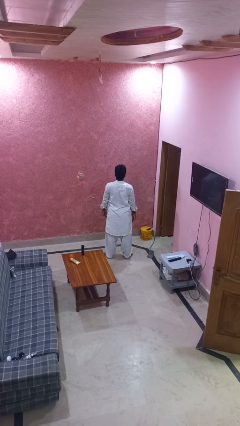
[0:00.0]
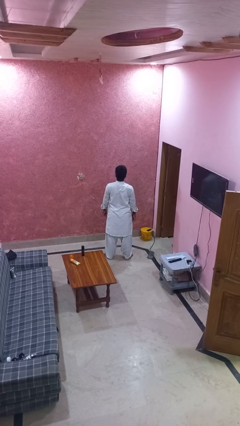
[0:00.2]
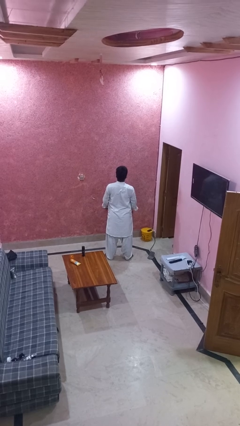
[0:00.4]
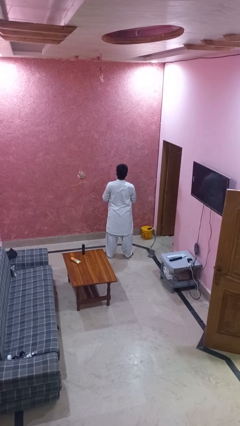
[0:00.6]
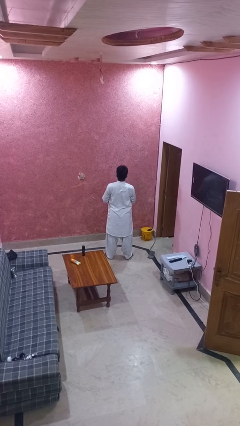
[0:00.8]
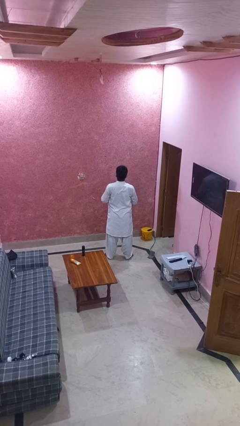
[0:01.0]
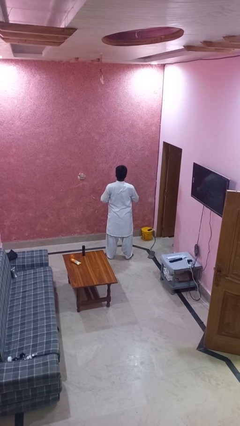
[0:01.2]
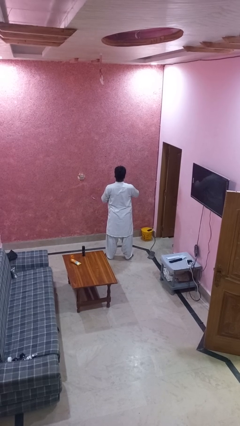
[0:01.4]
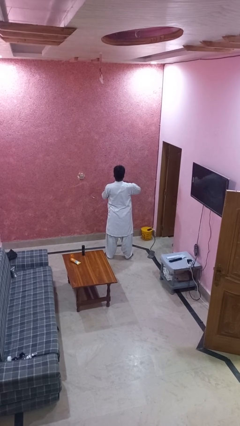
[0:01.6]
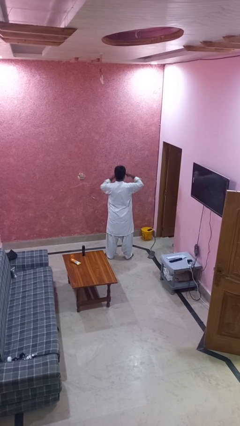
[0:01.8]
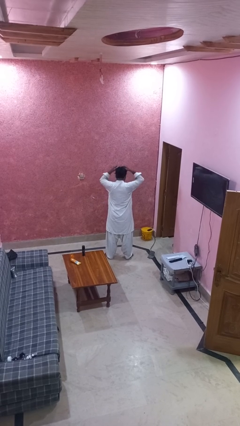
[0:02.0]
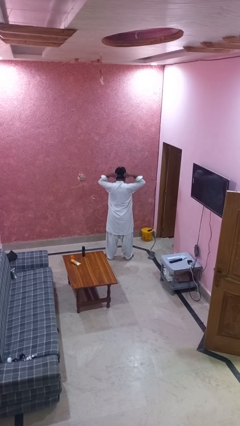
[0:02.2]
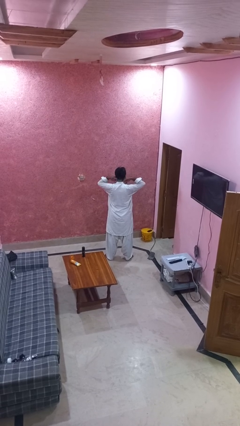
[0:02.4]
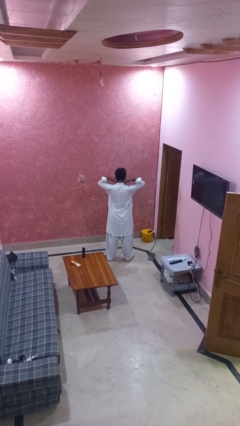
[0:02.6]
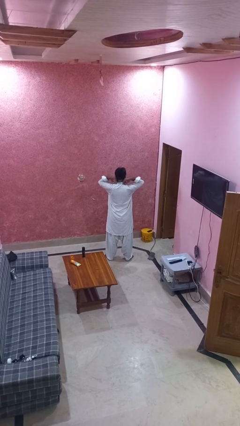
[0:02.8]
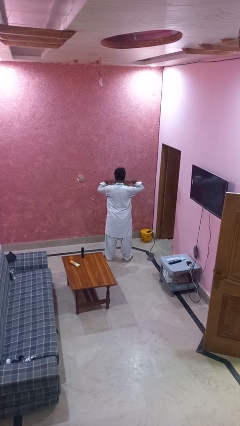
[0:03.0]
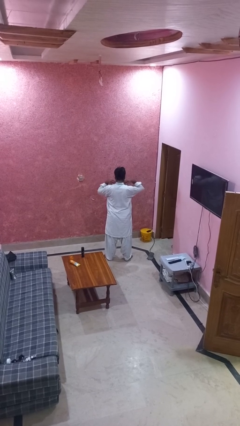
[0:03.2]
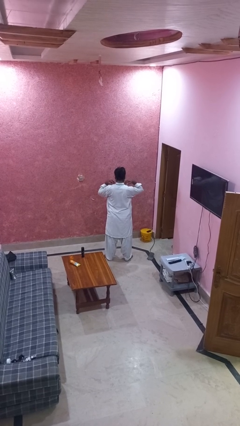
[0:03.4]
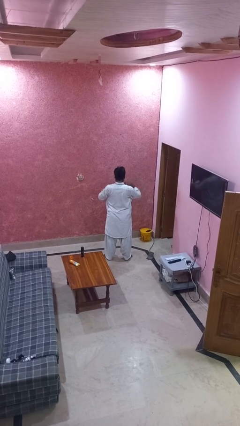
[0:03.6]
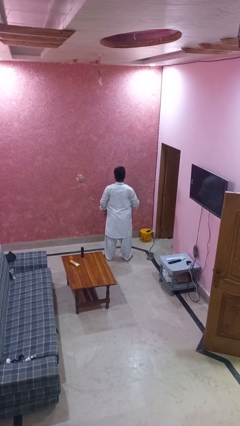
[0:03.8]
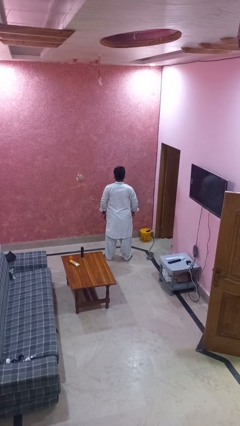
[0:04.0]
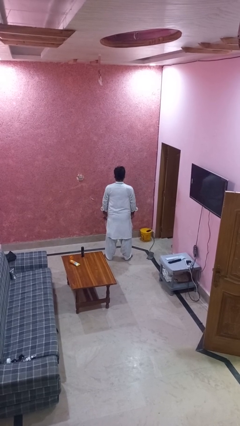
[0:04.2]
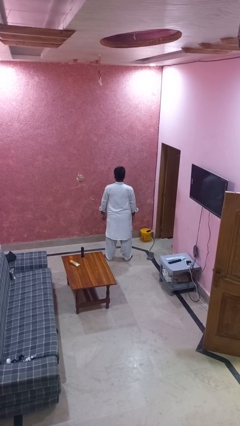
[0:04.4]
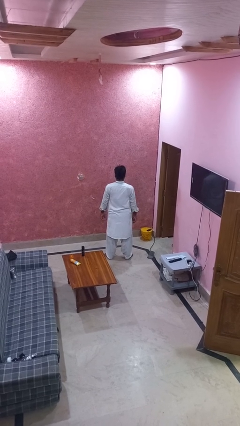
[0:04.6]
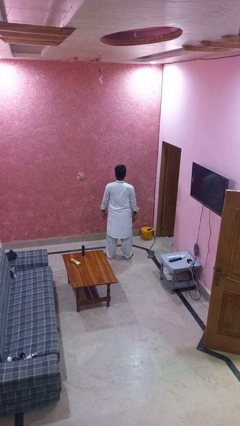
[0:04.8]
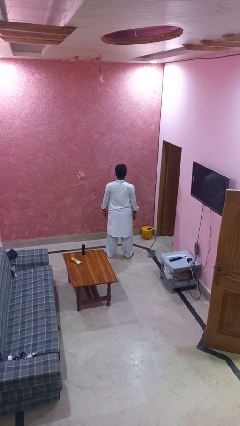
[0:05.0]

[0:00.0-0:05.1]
person puts on necklace

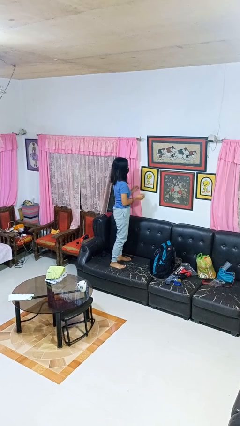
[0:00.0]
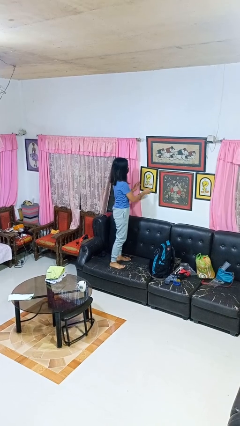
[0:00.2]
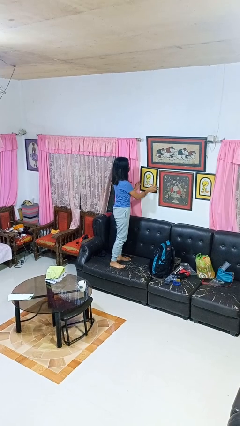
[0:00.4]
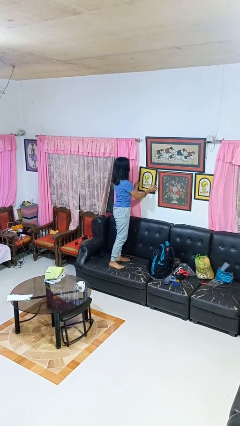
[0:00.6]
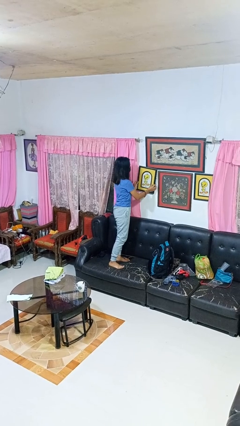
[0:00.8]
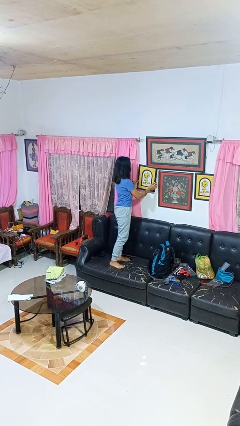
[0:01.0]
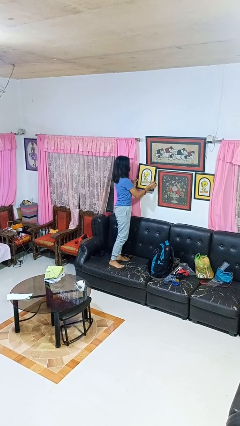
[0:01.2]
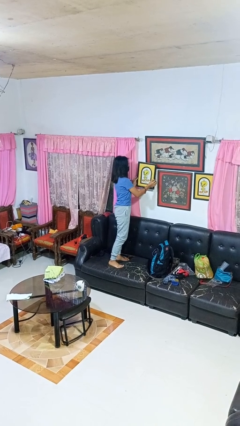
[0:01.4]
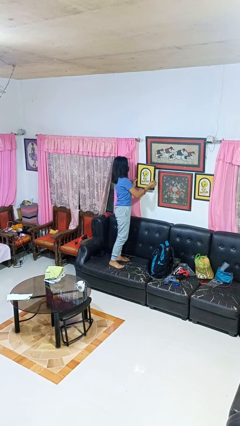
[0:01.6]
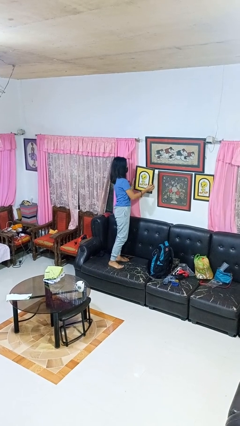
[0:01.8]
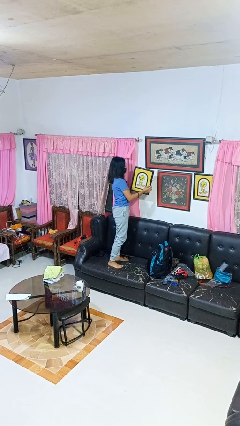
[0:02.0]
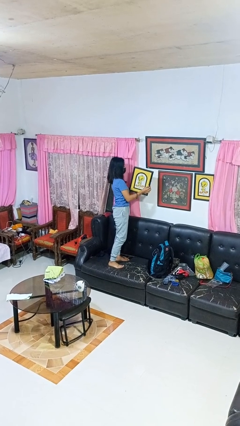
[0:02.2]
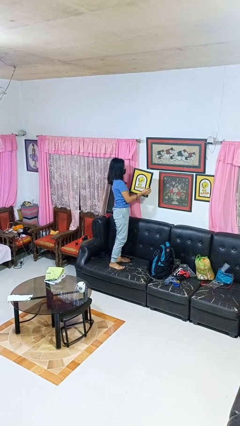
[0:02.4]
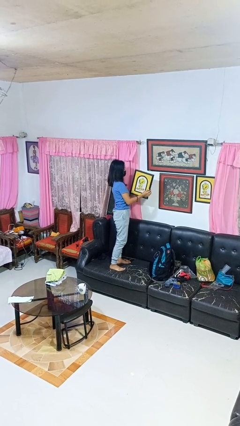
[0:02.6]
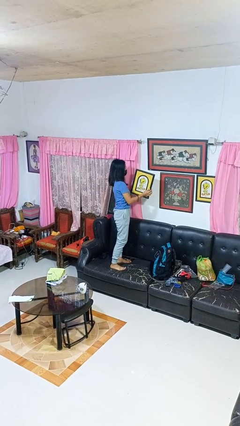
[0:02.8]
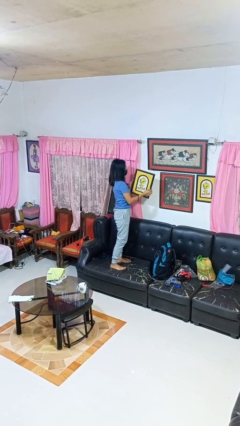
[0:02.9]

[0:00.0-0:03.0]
person takes down picture frame

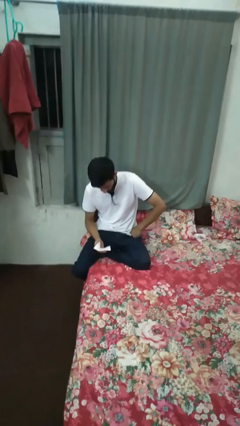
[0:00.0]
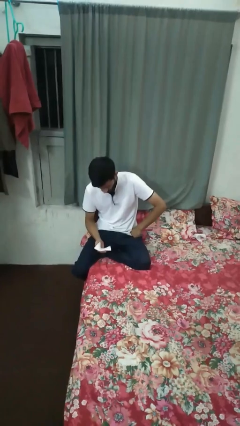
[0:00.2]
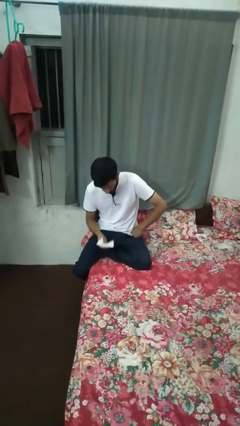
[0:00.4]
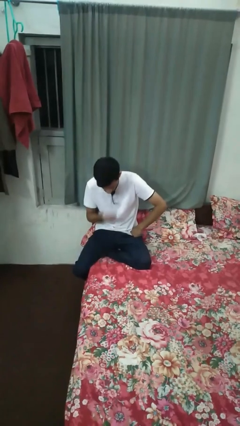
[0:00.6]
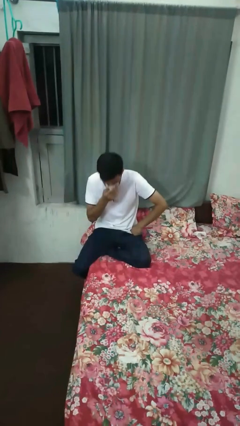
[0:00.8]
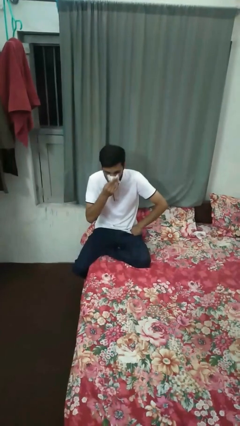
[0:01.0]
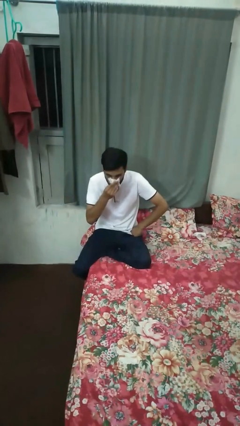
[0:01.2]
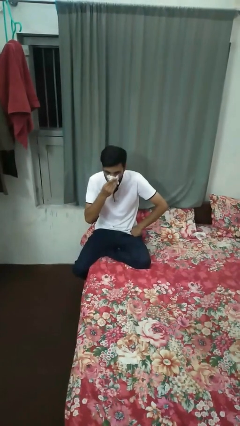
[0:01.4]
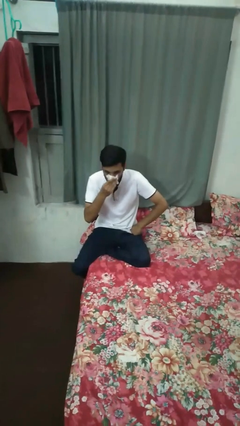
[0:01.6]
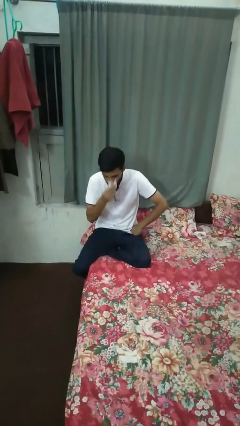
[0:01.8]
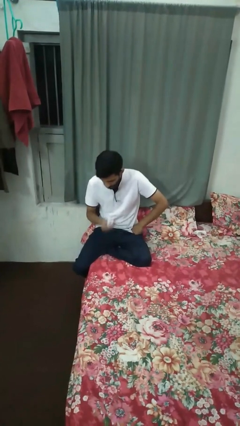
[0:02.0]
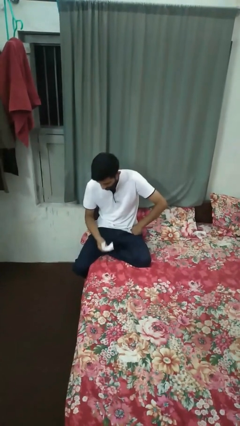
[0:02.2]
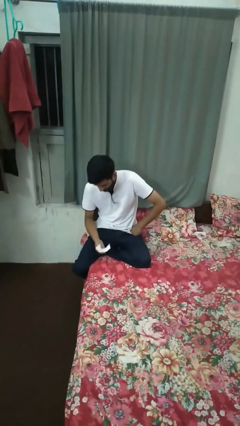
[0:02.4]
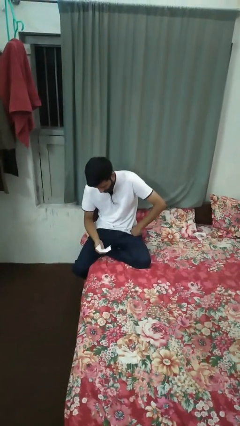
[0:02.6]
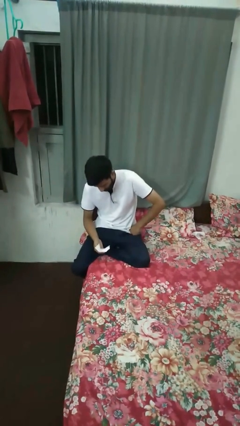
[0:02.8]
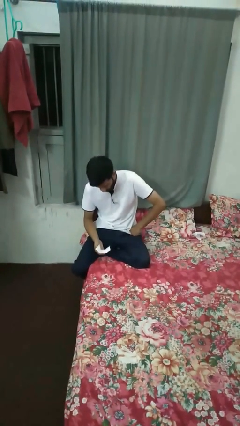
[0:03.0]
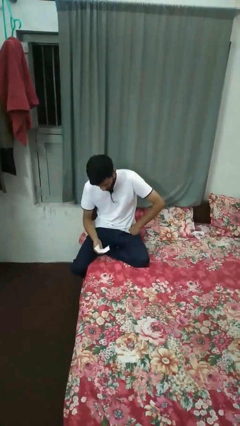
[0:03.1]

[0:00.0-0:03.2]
person blows nose

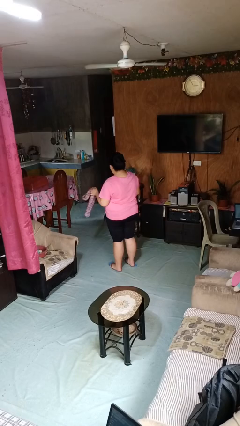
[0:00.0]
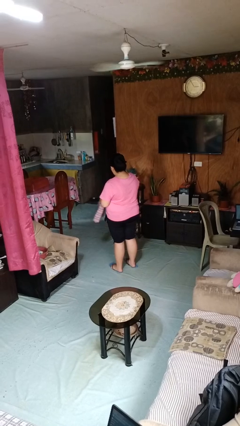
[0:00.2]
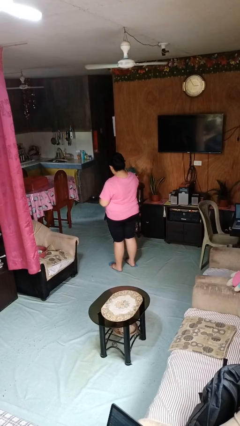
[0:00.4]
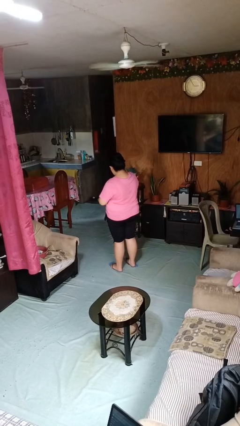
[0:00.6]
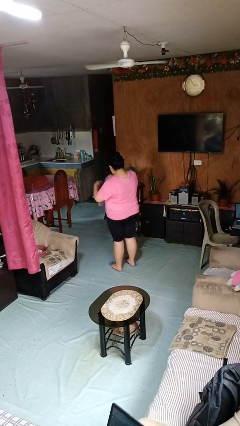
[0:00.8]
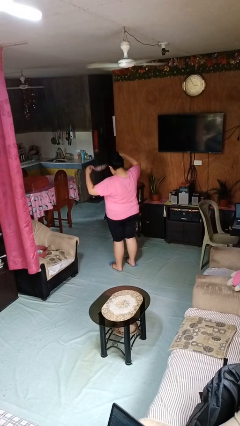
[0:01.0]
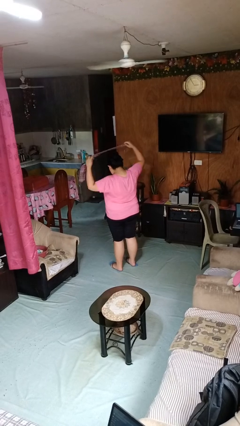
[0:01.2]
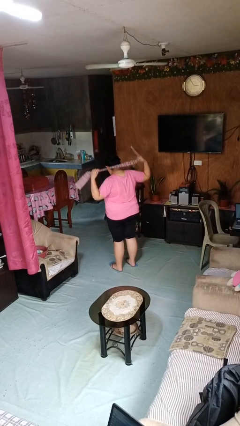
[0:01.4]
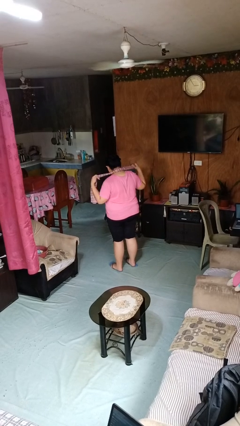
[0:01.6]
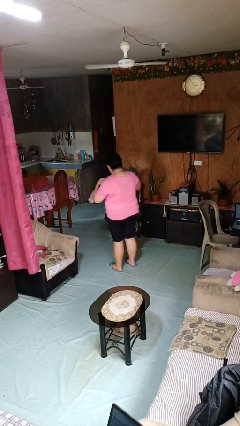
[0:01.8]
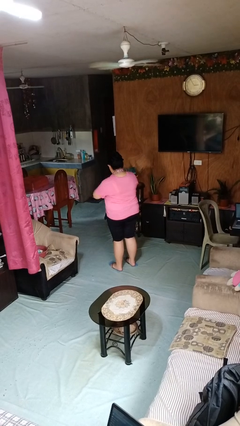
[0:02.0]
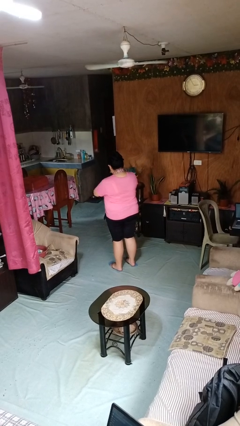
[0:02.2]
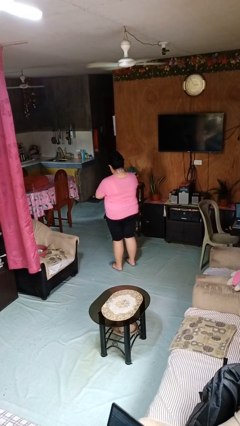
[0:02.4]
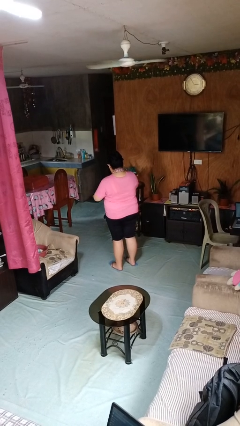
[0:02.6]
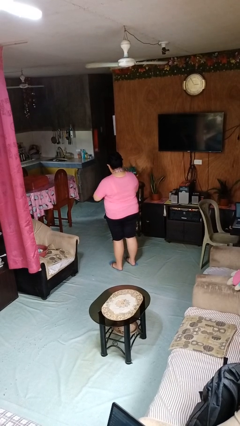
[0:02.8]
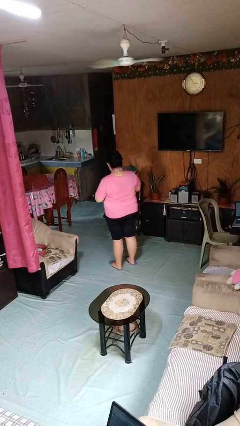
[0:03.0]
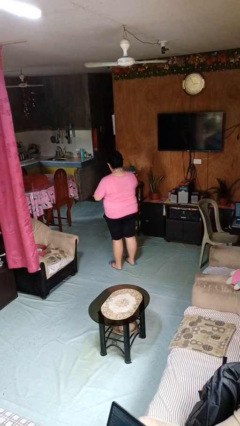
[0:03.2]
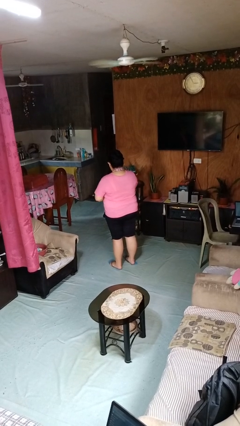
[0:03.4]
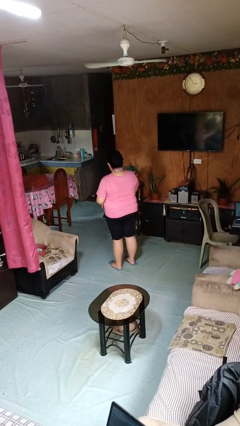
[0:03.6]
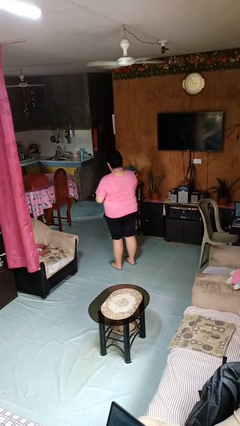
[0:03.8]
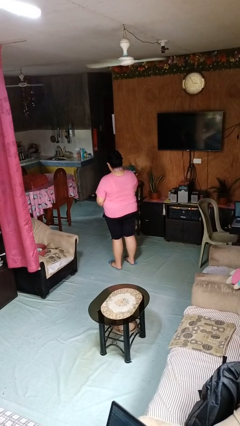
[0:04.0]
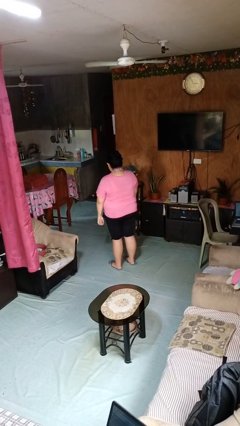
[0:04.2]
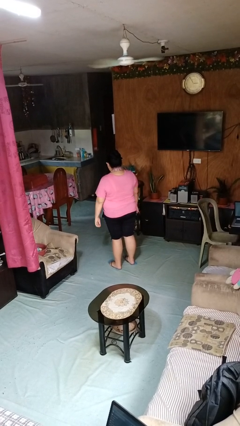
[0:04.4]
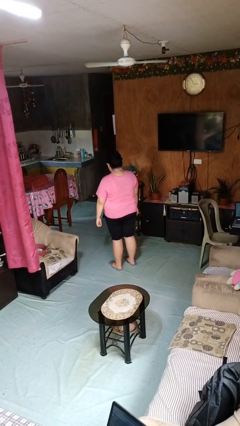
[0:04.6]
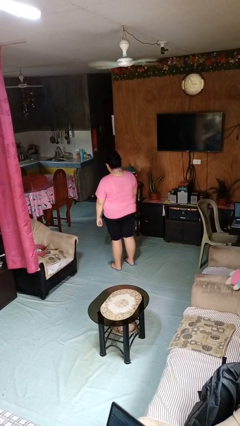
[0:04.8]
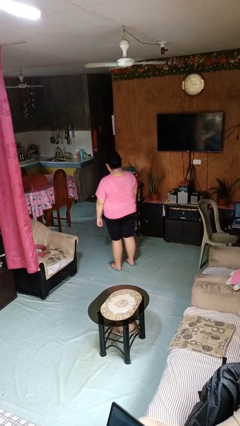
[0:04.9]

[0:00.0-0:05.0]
person puts on necktie

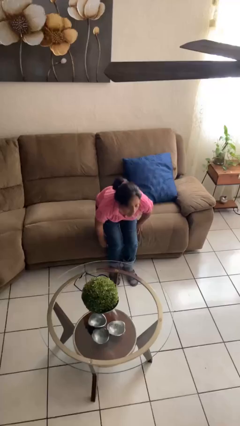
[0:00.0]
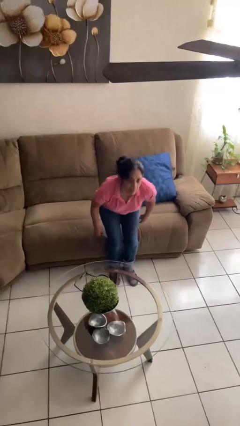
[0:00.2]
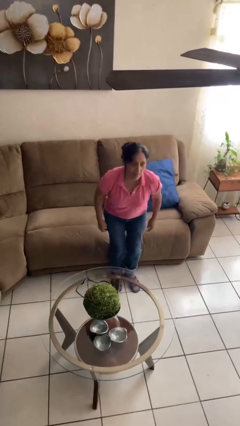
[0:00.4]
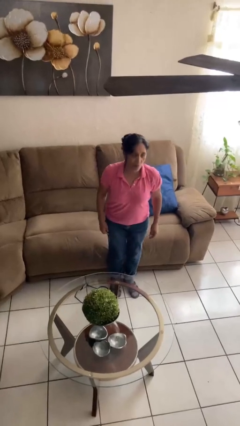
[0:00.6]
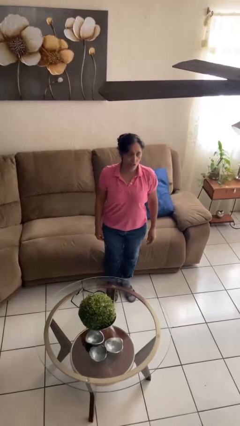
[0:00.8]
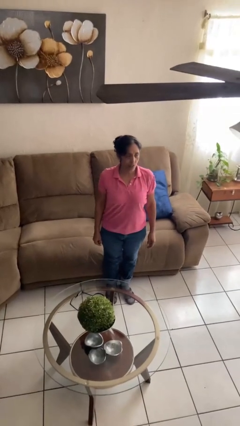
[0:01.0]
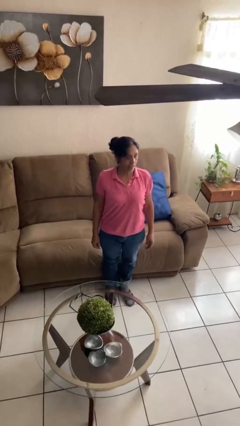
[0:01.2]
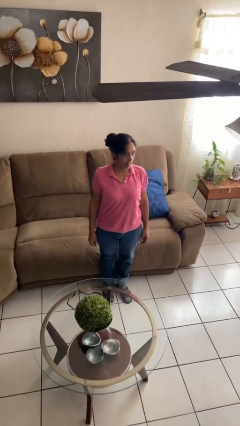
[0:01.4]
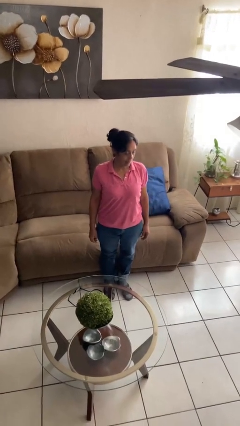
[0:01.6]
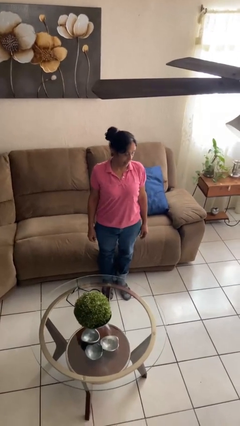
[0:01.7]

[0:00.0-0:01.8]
person stands up
